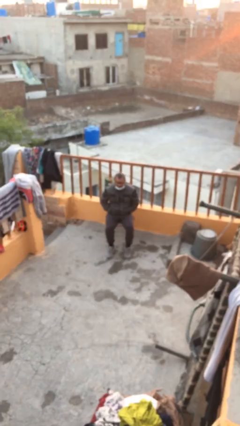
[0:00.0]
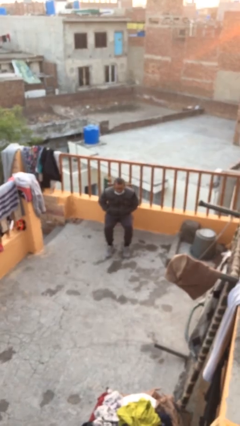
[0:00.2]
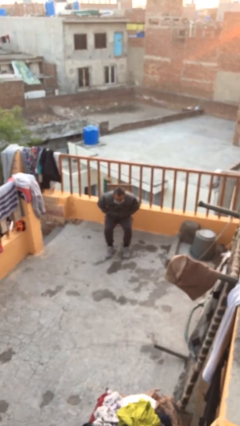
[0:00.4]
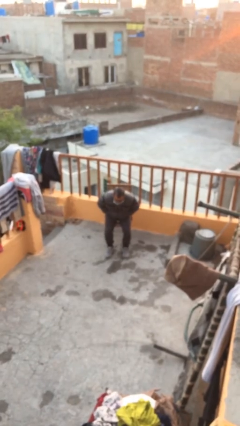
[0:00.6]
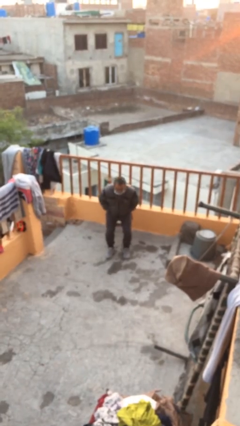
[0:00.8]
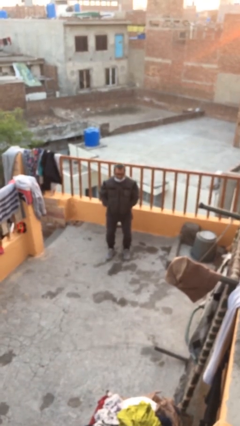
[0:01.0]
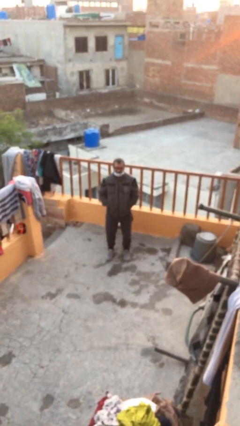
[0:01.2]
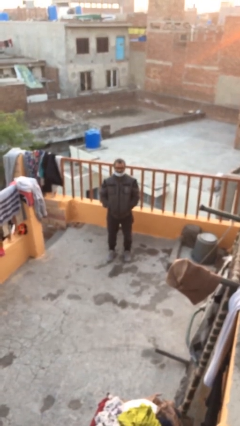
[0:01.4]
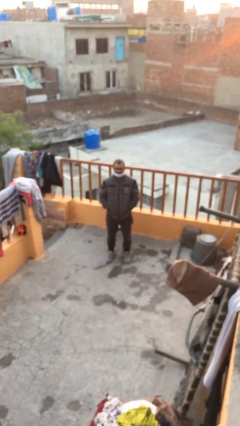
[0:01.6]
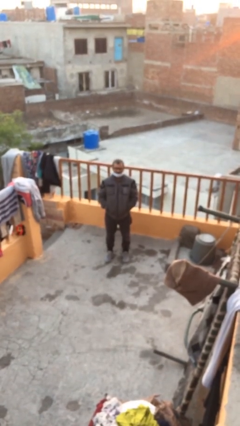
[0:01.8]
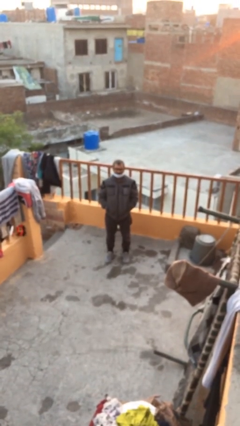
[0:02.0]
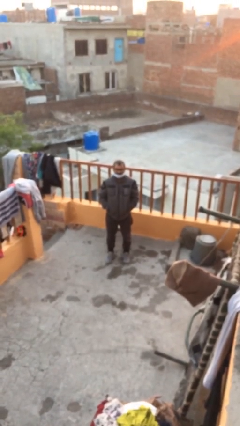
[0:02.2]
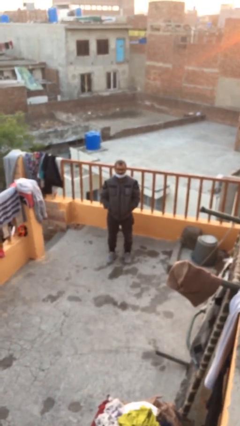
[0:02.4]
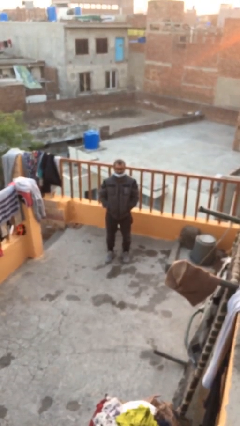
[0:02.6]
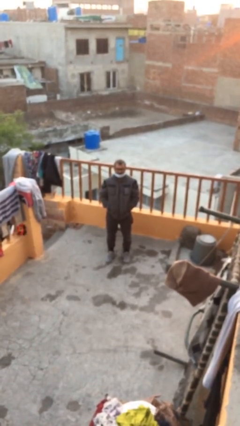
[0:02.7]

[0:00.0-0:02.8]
person stands up

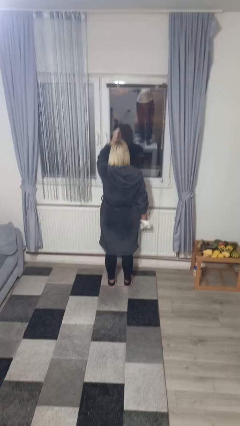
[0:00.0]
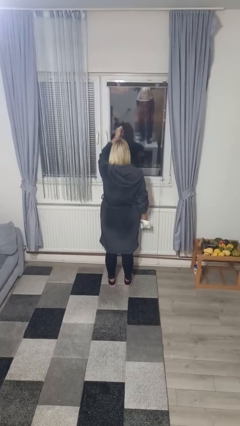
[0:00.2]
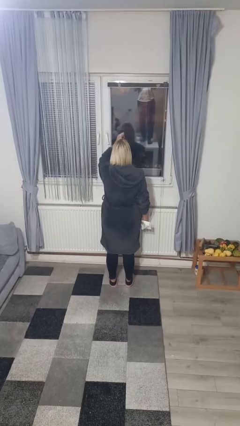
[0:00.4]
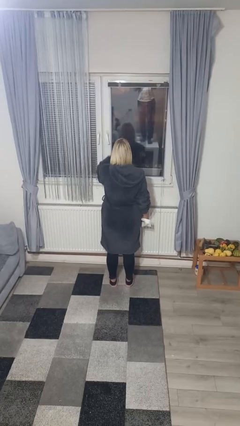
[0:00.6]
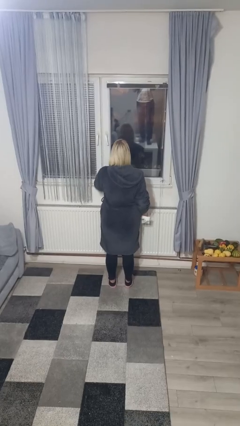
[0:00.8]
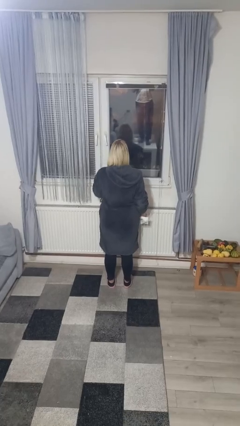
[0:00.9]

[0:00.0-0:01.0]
person sprays from bottle

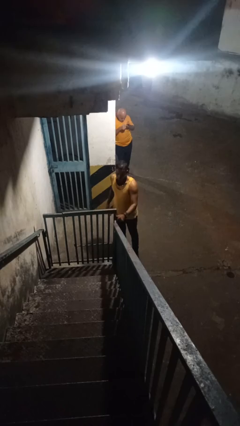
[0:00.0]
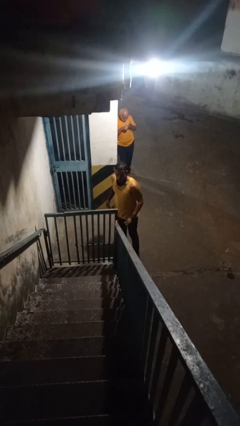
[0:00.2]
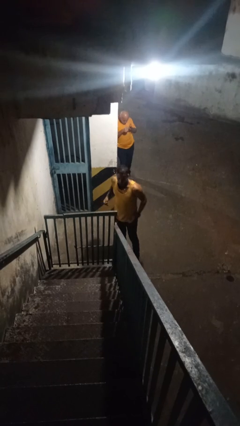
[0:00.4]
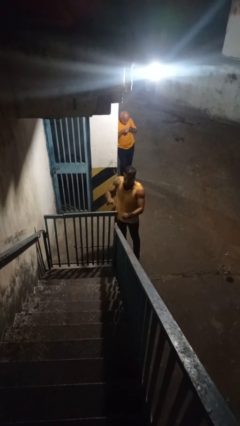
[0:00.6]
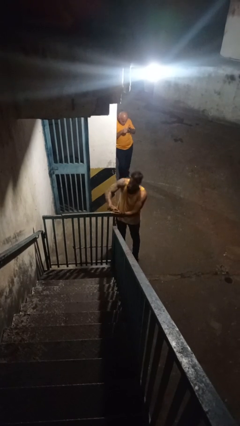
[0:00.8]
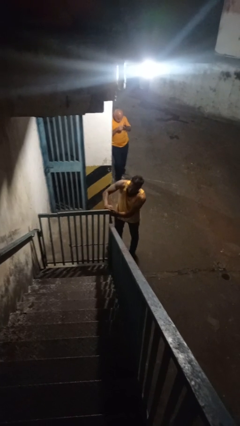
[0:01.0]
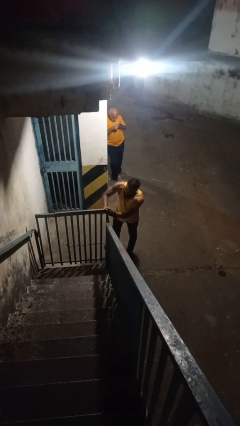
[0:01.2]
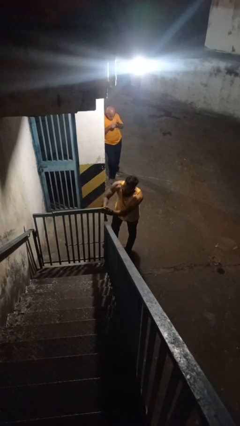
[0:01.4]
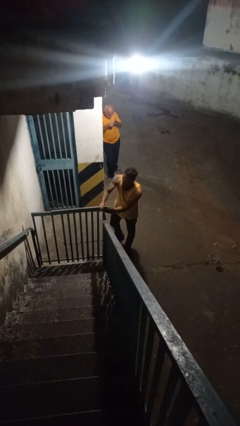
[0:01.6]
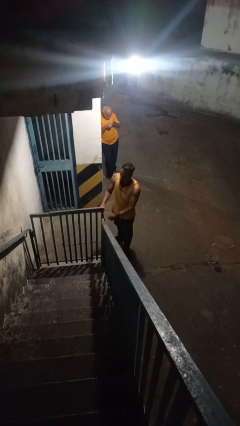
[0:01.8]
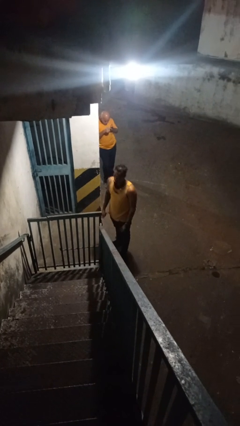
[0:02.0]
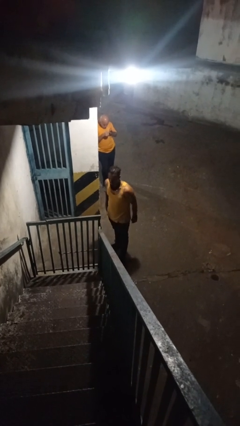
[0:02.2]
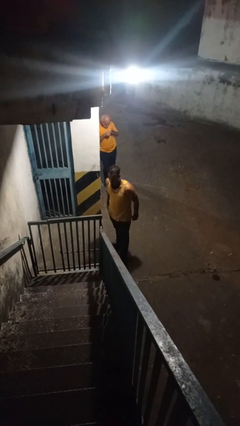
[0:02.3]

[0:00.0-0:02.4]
person locks door with keys

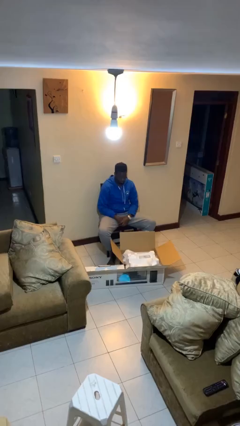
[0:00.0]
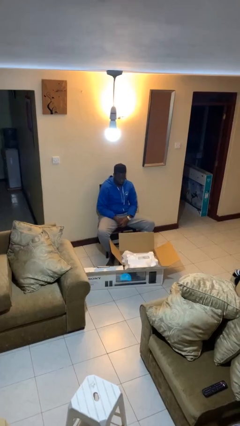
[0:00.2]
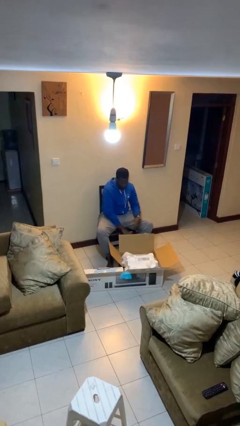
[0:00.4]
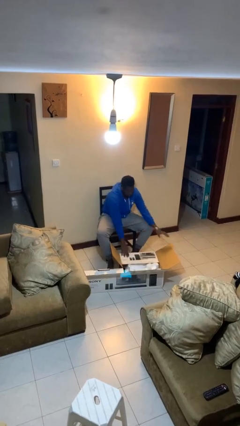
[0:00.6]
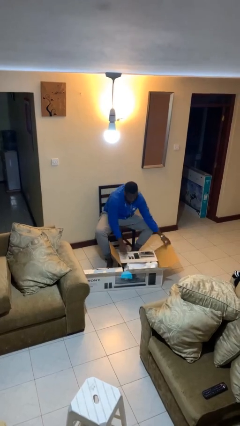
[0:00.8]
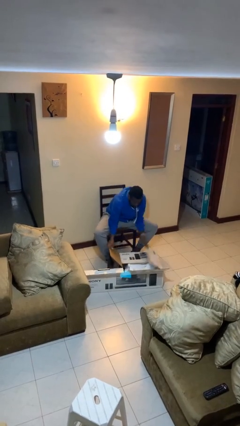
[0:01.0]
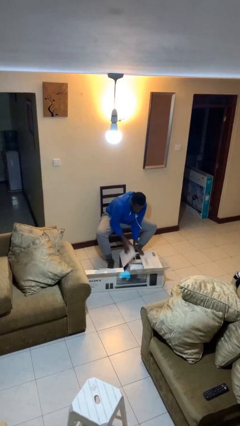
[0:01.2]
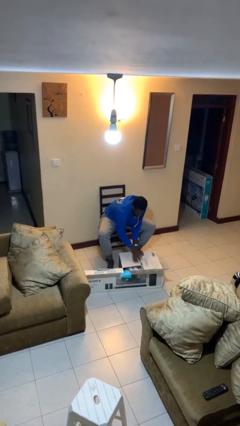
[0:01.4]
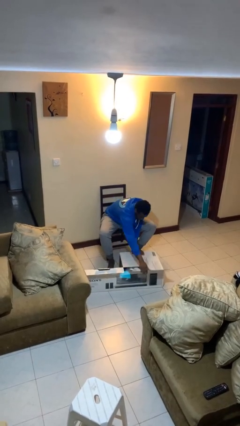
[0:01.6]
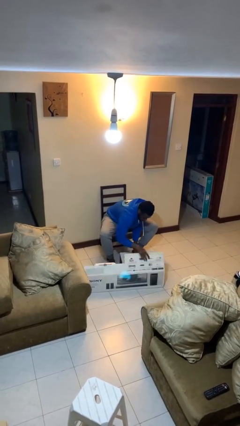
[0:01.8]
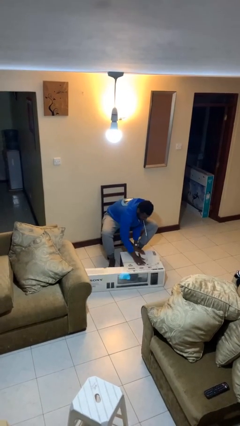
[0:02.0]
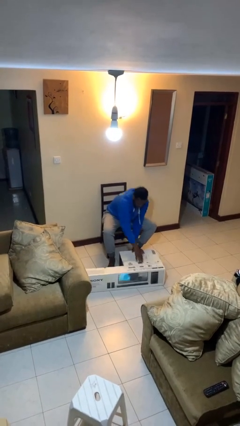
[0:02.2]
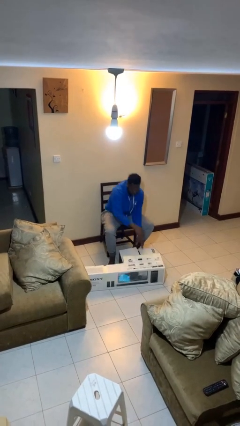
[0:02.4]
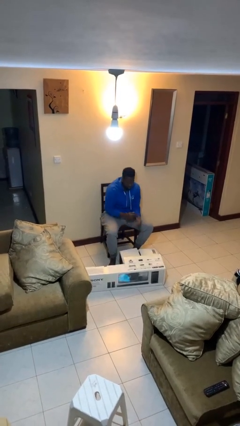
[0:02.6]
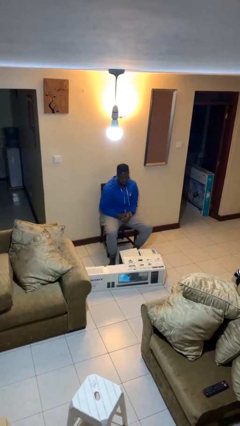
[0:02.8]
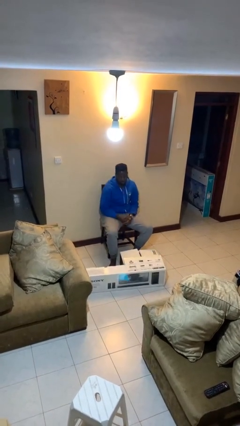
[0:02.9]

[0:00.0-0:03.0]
person closes box

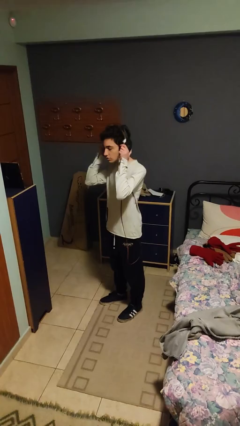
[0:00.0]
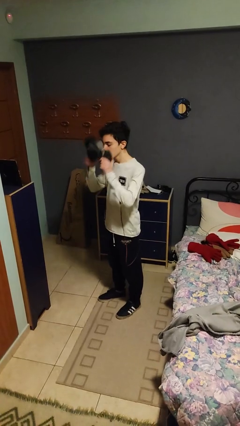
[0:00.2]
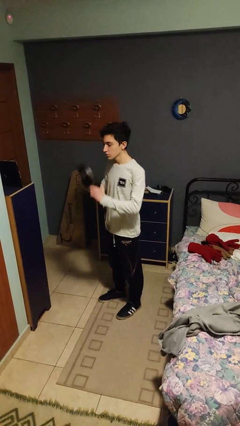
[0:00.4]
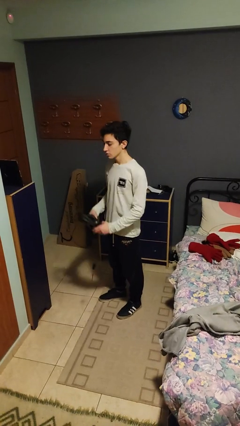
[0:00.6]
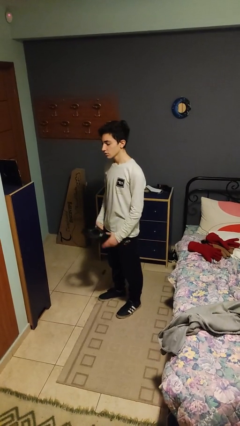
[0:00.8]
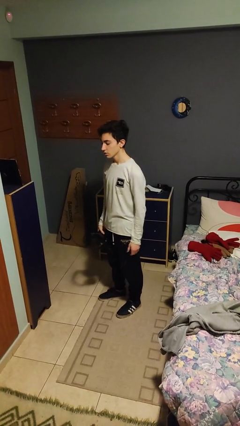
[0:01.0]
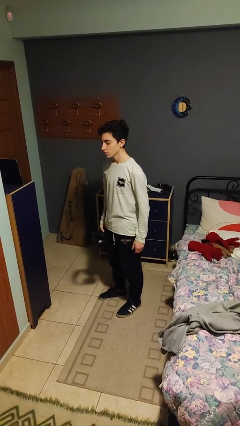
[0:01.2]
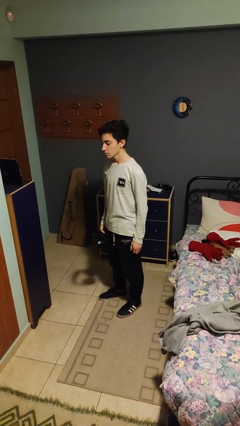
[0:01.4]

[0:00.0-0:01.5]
person takes off headphones

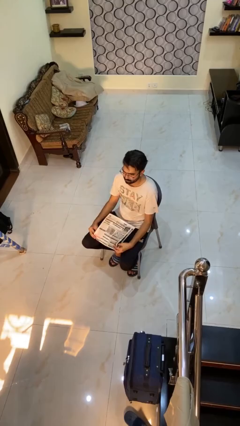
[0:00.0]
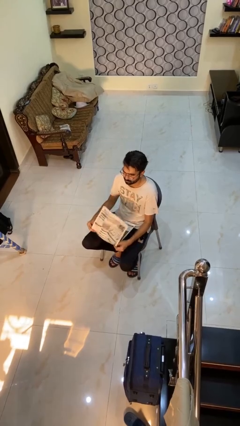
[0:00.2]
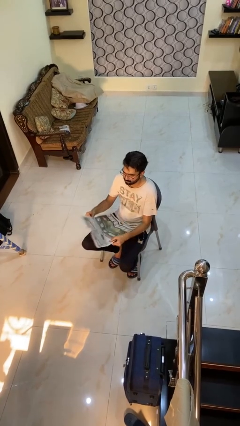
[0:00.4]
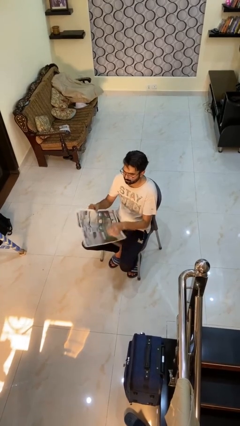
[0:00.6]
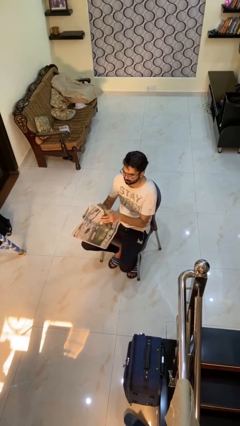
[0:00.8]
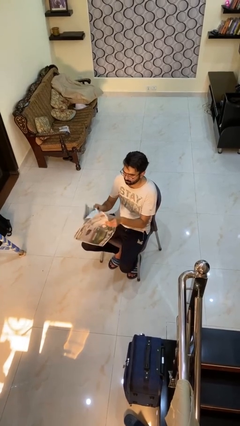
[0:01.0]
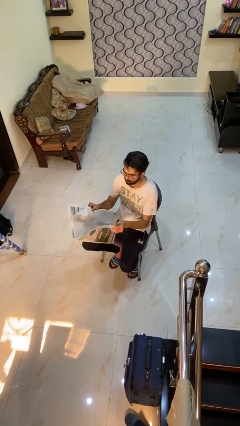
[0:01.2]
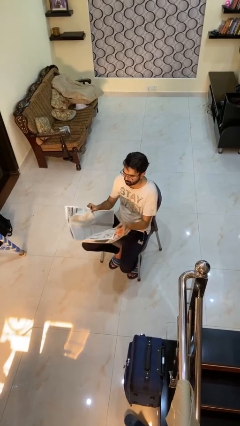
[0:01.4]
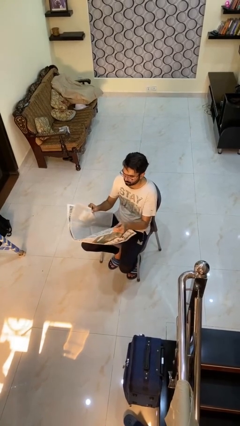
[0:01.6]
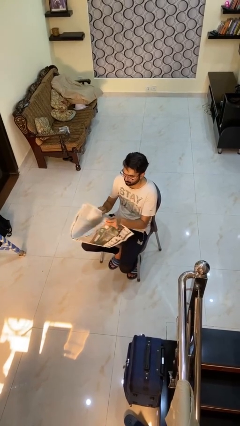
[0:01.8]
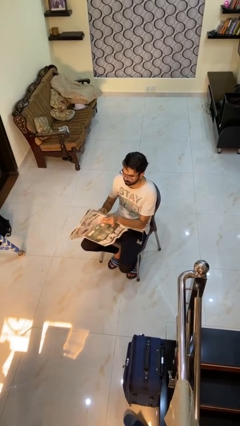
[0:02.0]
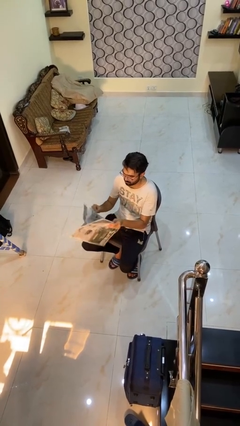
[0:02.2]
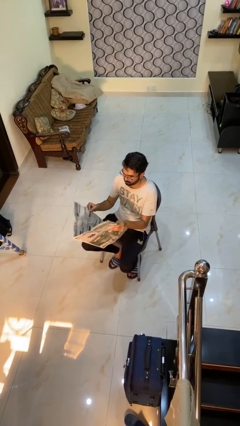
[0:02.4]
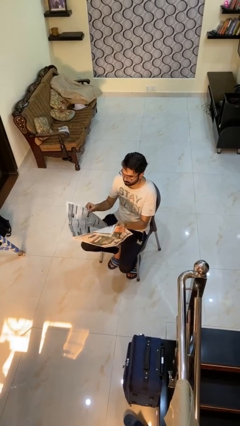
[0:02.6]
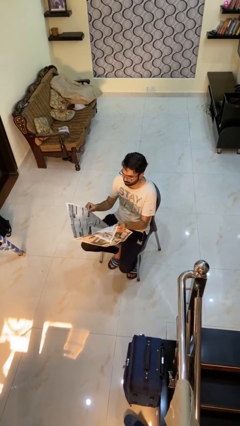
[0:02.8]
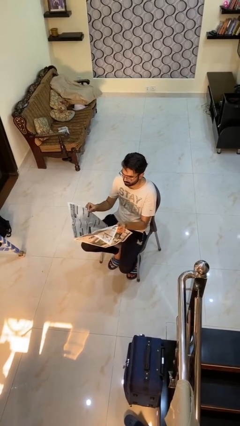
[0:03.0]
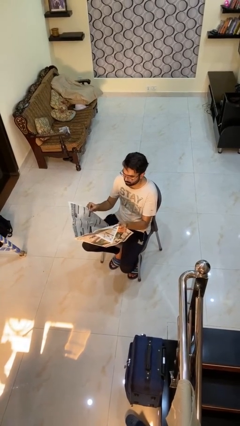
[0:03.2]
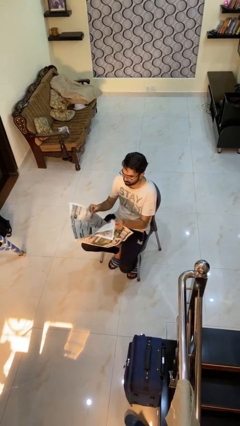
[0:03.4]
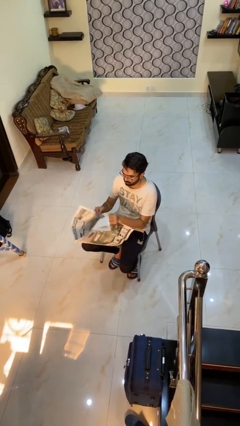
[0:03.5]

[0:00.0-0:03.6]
person reads newspaper

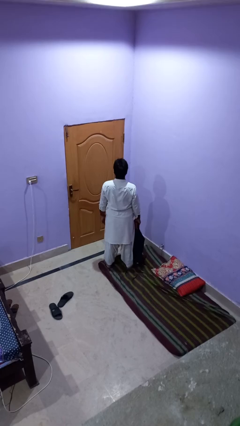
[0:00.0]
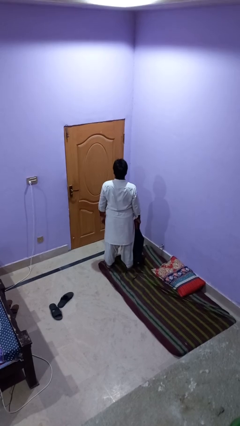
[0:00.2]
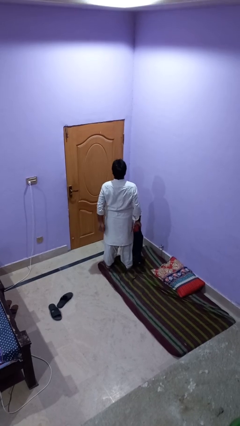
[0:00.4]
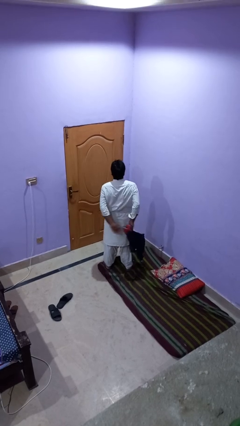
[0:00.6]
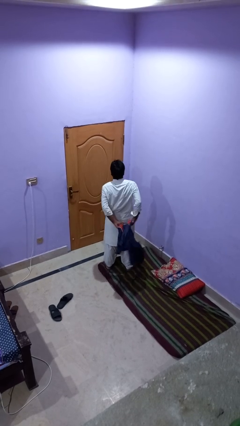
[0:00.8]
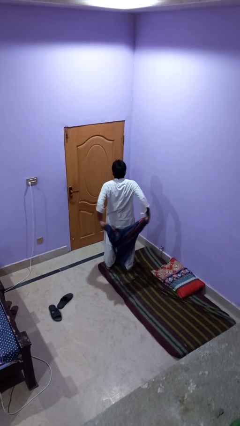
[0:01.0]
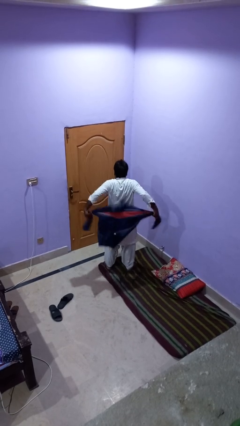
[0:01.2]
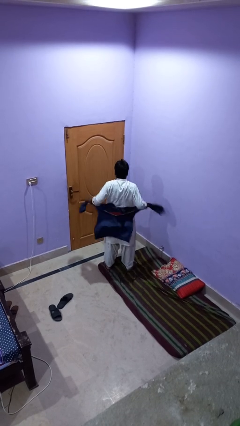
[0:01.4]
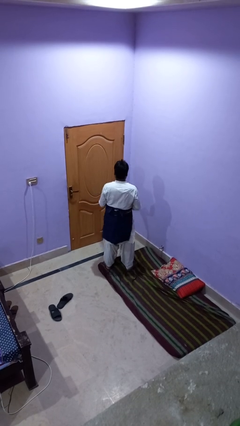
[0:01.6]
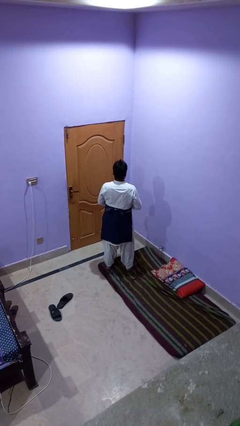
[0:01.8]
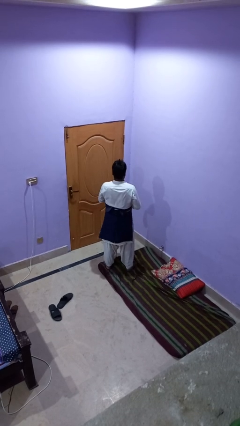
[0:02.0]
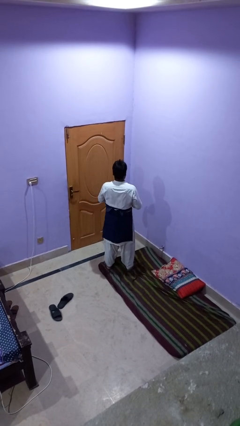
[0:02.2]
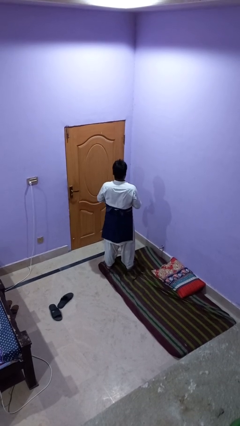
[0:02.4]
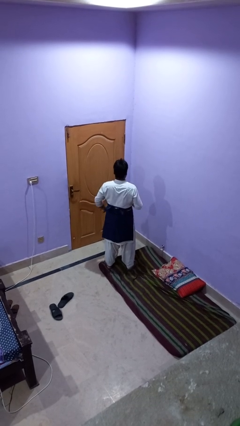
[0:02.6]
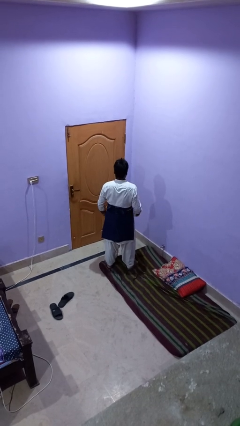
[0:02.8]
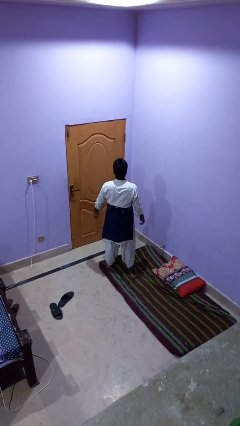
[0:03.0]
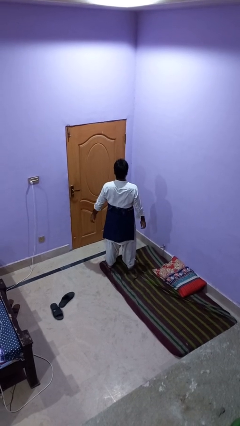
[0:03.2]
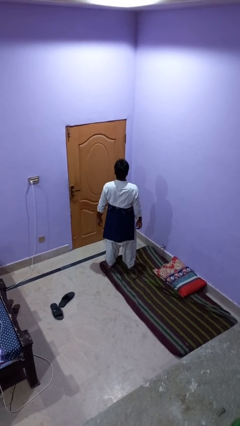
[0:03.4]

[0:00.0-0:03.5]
person ties jacket around waist
